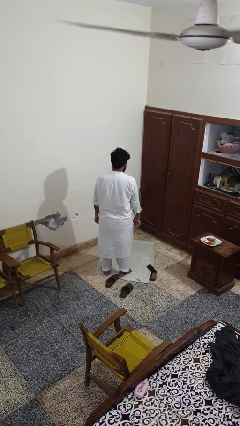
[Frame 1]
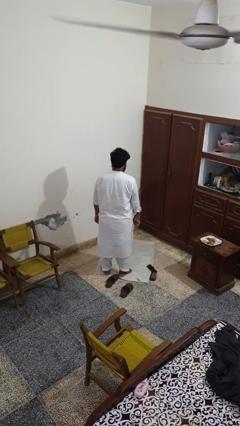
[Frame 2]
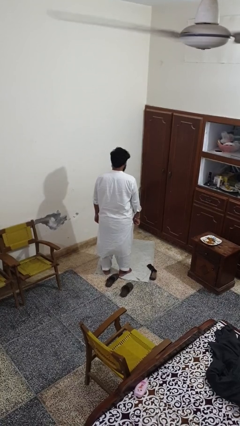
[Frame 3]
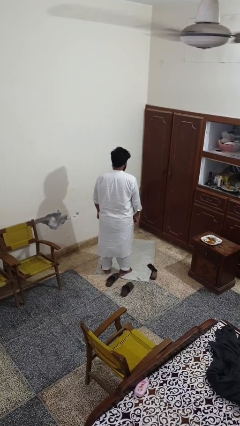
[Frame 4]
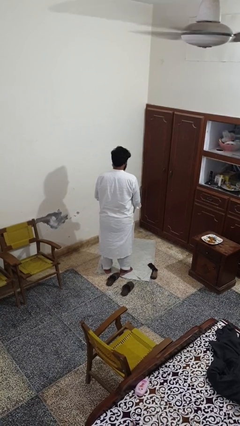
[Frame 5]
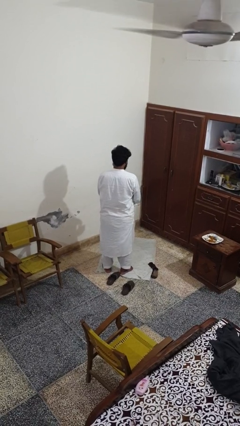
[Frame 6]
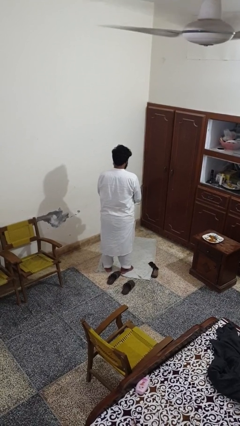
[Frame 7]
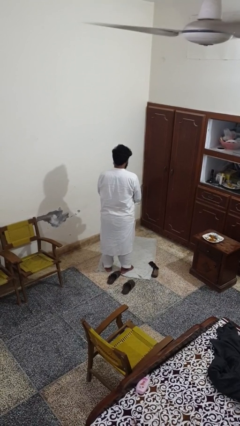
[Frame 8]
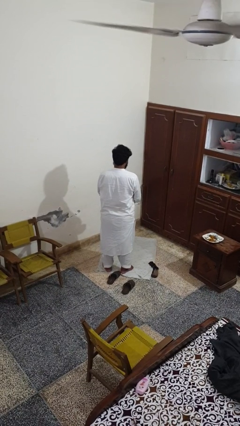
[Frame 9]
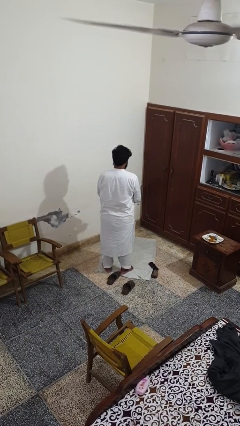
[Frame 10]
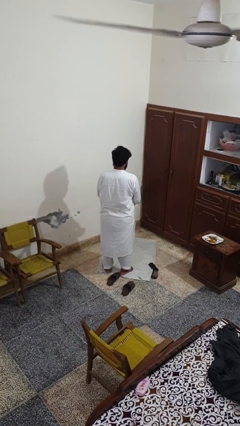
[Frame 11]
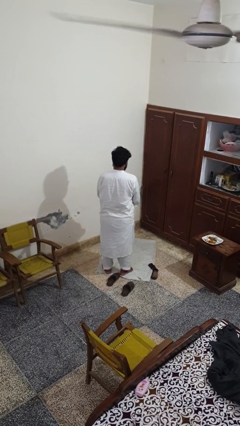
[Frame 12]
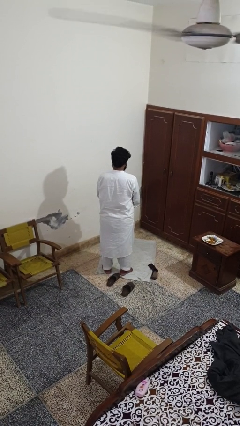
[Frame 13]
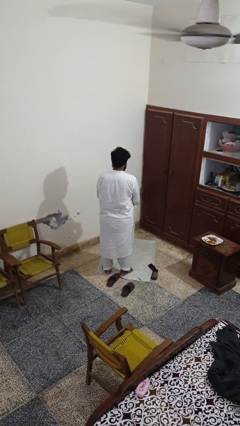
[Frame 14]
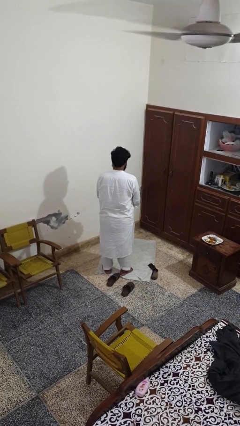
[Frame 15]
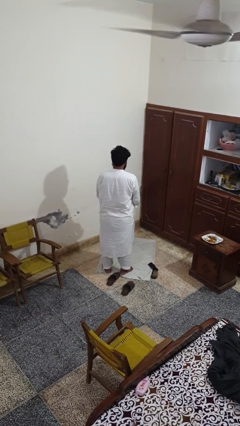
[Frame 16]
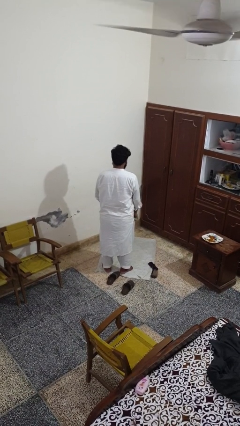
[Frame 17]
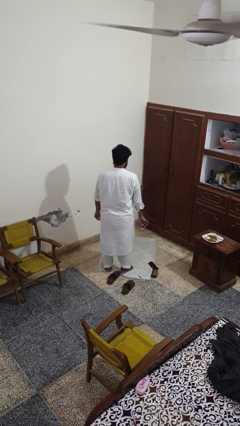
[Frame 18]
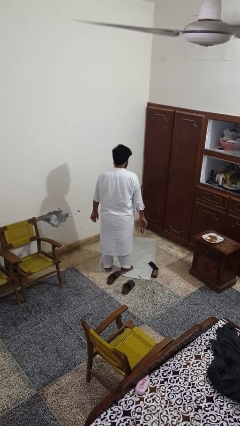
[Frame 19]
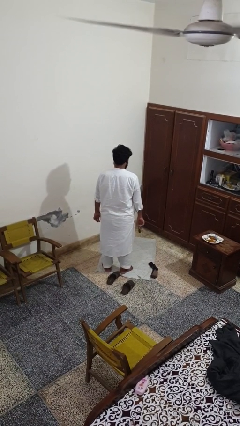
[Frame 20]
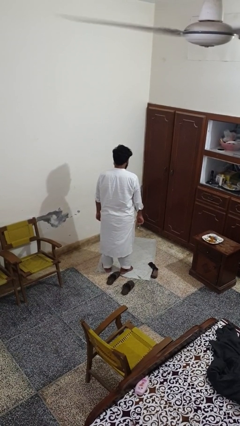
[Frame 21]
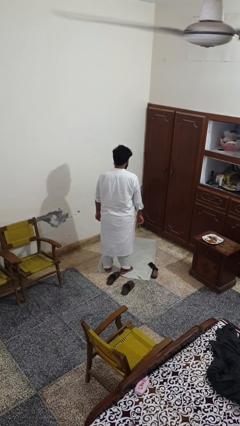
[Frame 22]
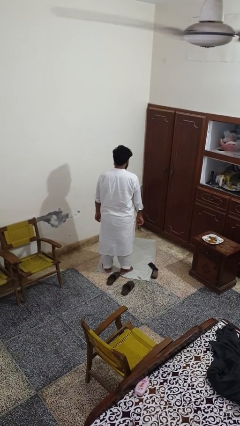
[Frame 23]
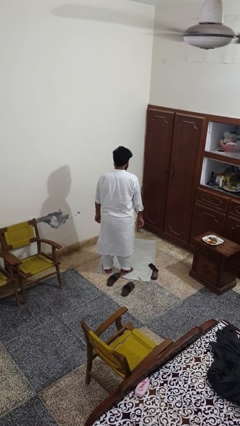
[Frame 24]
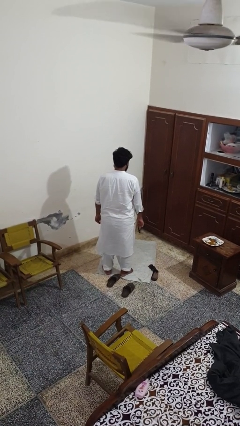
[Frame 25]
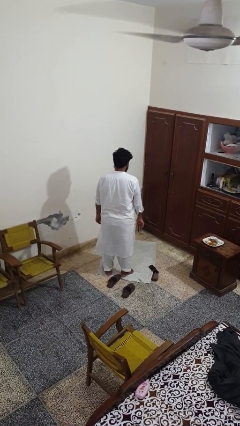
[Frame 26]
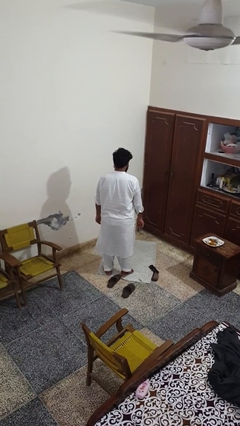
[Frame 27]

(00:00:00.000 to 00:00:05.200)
person takes off wristwatch

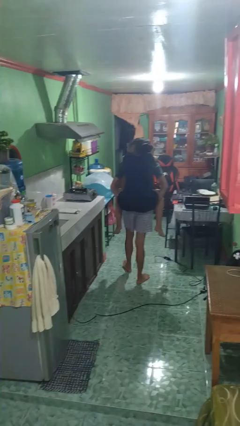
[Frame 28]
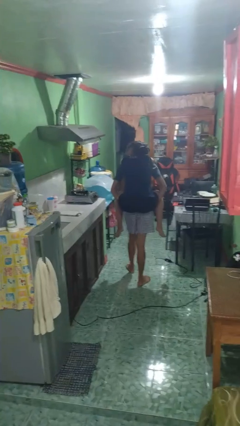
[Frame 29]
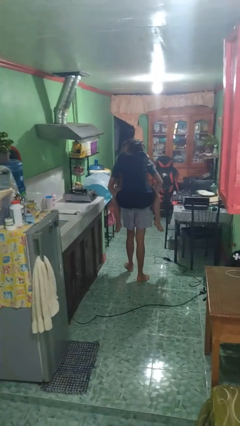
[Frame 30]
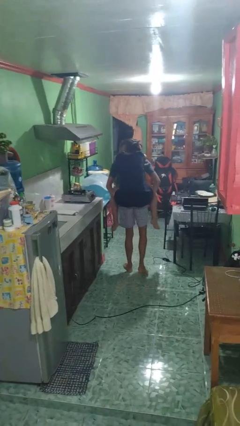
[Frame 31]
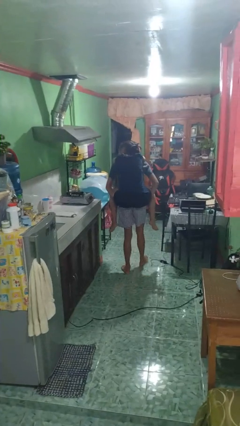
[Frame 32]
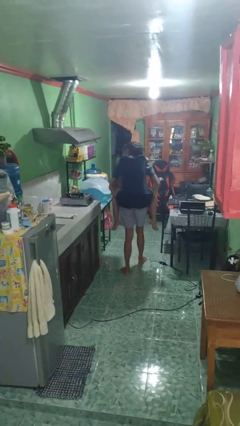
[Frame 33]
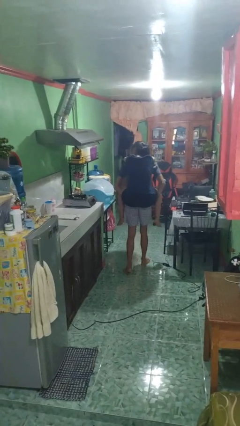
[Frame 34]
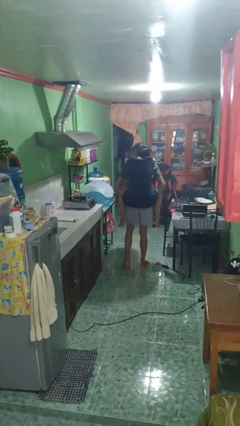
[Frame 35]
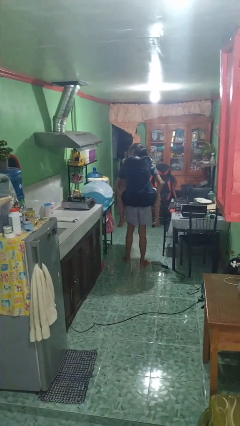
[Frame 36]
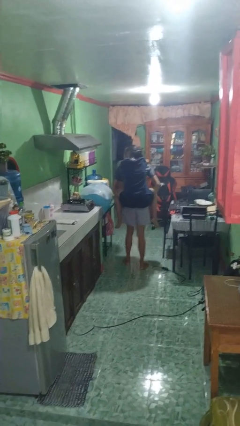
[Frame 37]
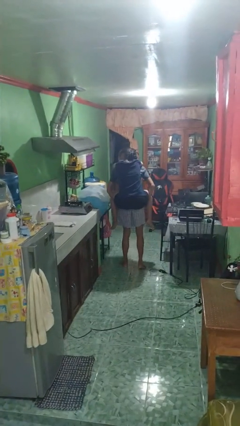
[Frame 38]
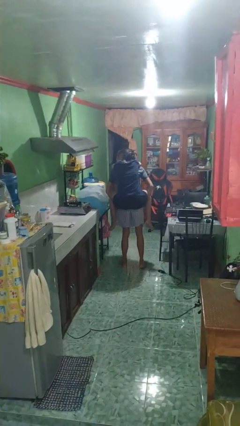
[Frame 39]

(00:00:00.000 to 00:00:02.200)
person carries person on back

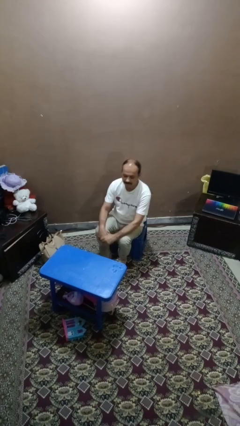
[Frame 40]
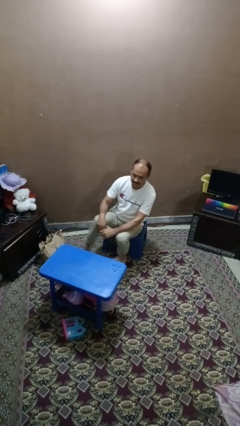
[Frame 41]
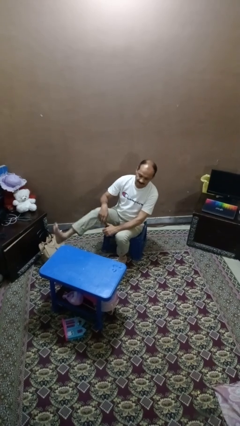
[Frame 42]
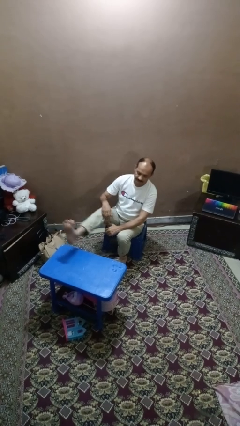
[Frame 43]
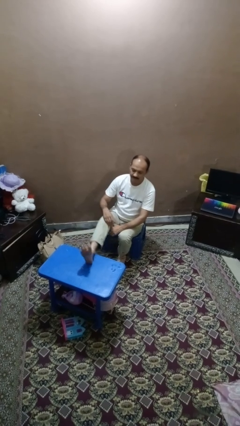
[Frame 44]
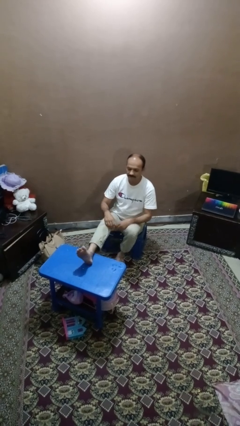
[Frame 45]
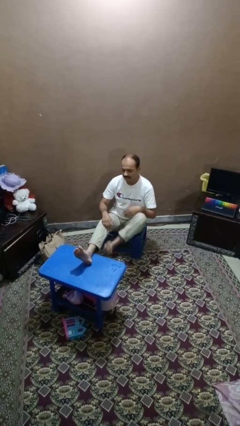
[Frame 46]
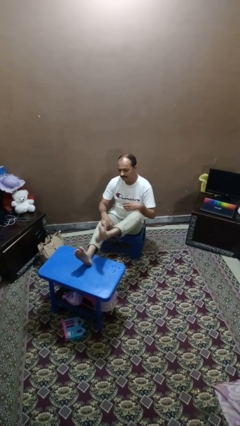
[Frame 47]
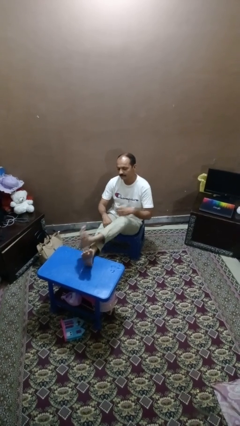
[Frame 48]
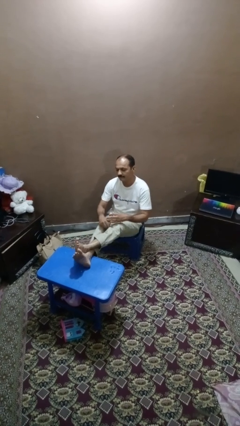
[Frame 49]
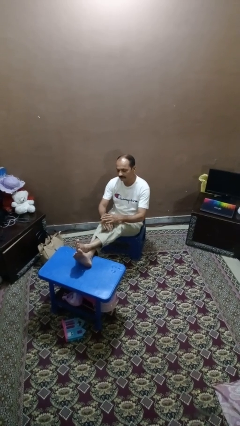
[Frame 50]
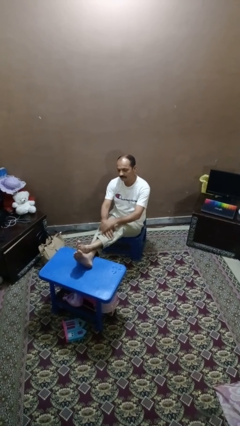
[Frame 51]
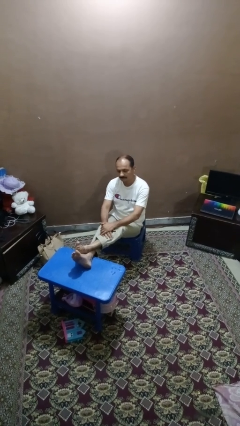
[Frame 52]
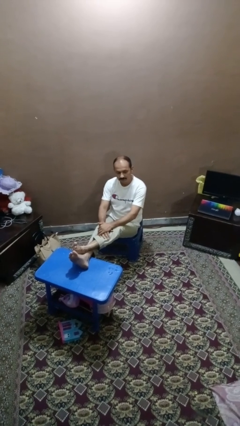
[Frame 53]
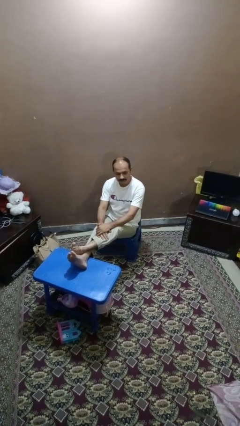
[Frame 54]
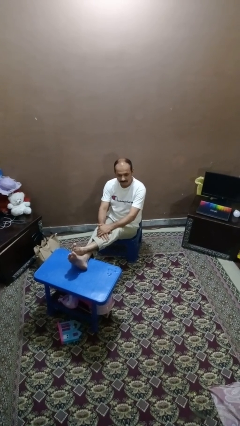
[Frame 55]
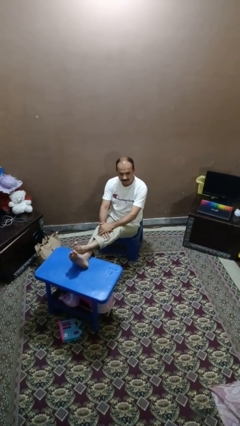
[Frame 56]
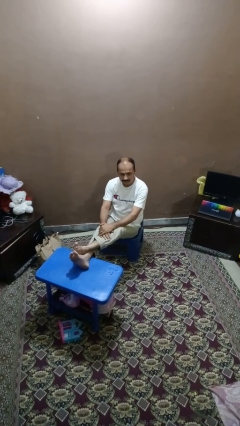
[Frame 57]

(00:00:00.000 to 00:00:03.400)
person puts feet up

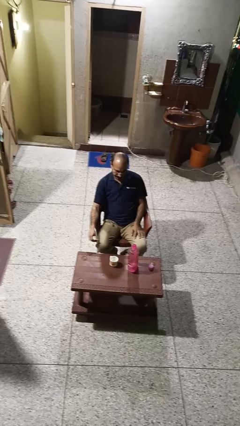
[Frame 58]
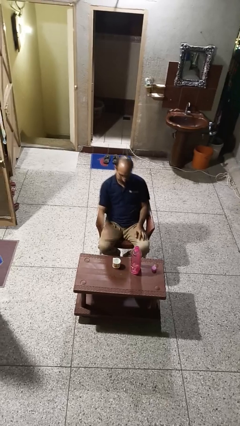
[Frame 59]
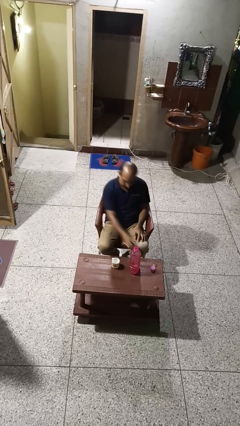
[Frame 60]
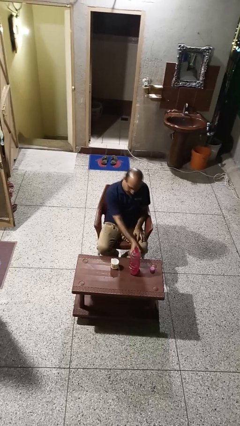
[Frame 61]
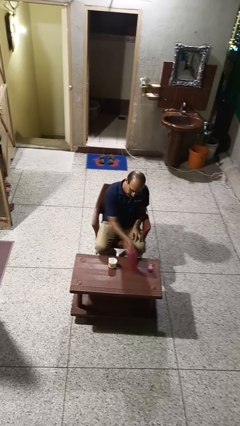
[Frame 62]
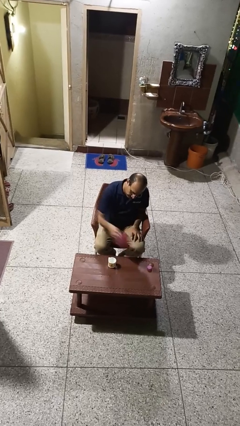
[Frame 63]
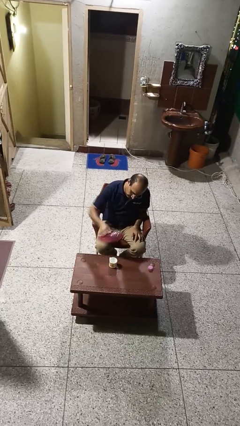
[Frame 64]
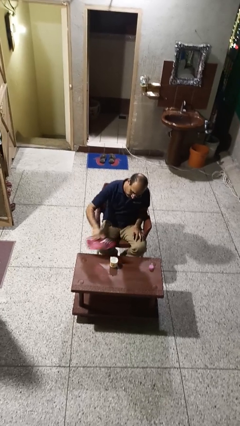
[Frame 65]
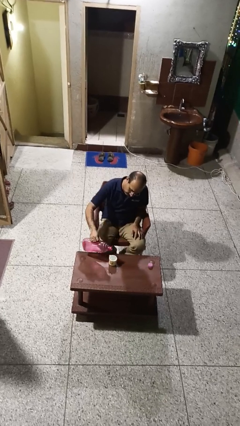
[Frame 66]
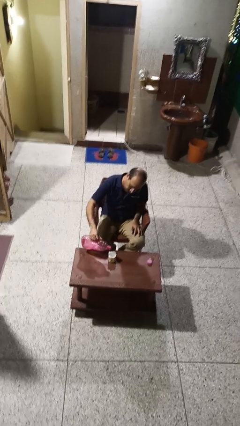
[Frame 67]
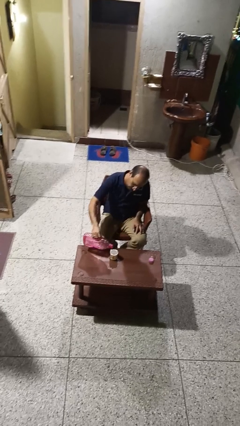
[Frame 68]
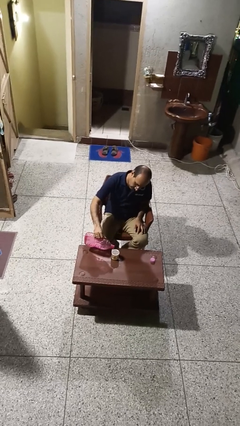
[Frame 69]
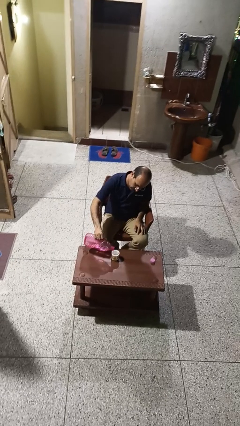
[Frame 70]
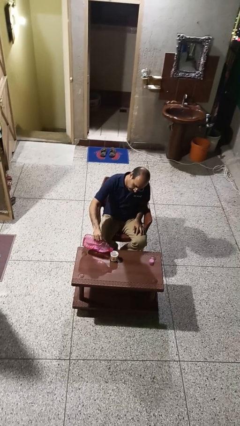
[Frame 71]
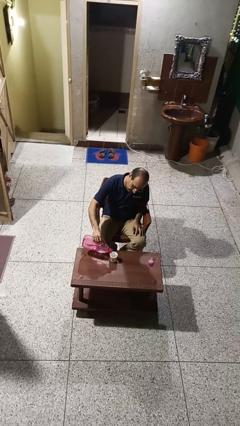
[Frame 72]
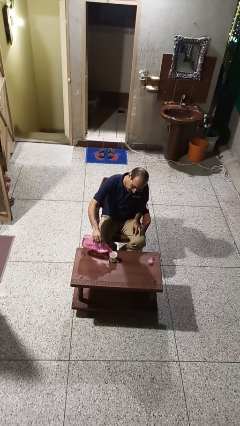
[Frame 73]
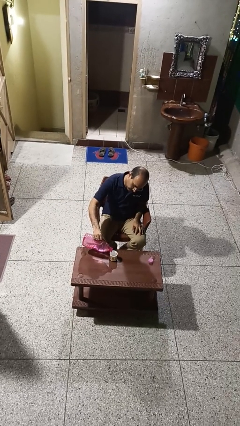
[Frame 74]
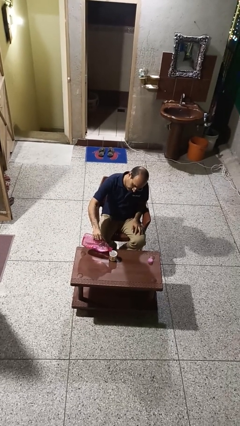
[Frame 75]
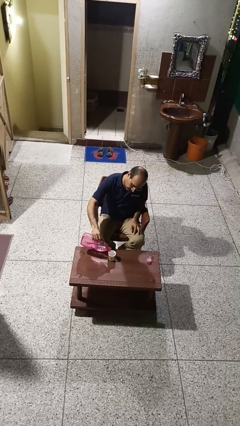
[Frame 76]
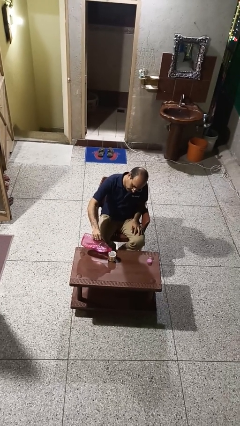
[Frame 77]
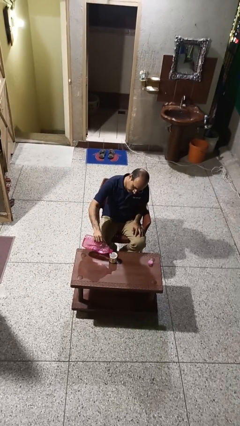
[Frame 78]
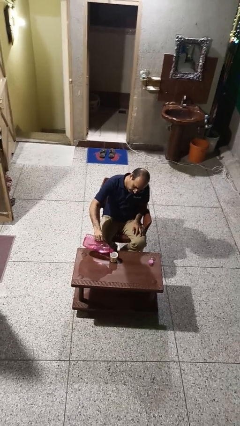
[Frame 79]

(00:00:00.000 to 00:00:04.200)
person pours liquid into cup

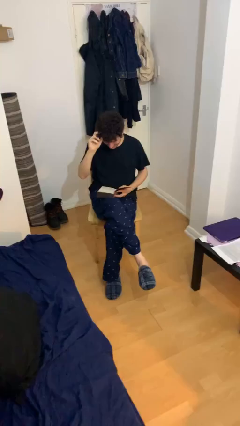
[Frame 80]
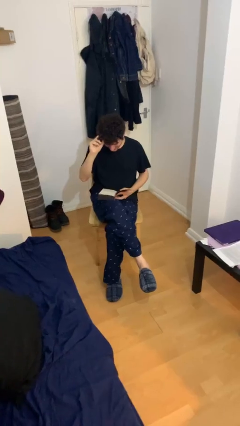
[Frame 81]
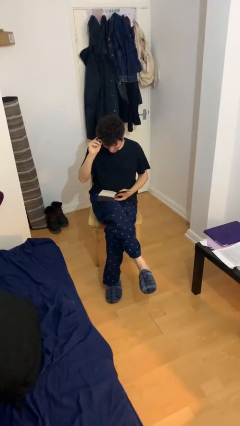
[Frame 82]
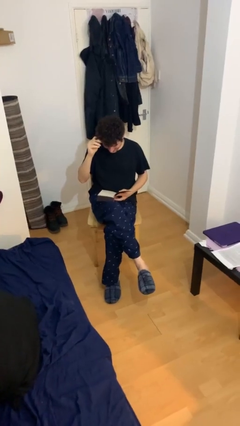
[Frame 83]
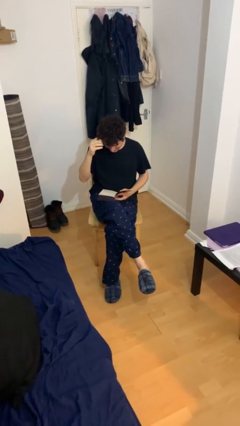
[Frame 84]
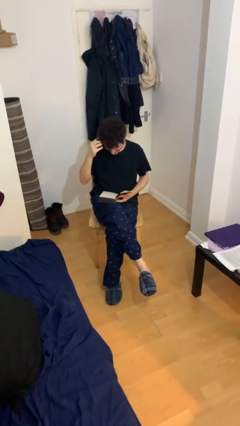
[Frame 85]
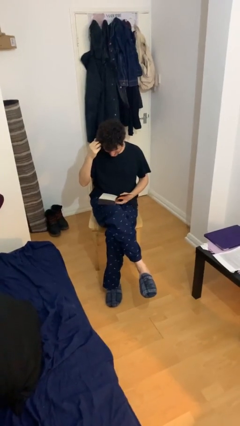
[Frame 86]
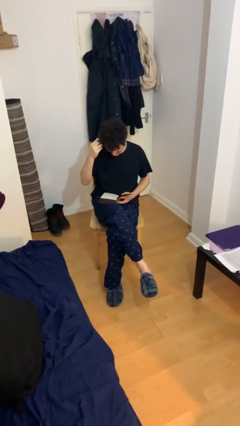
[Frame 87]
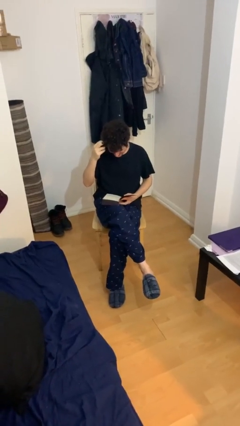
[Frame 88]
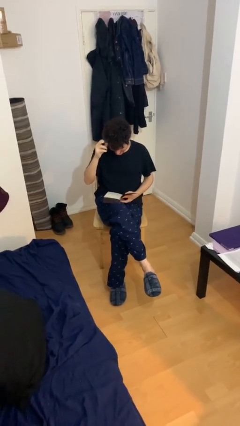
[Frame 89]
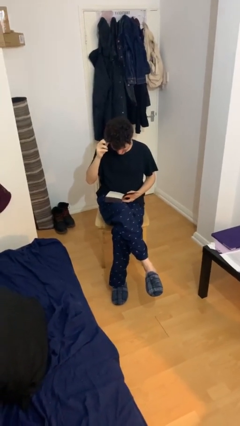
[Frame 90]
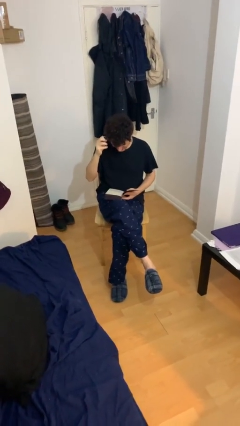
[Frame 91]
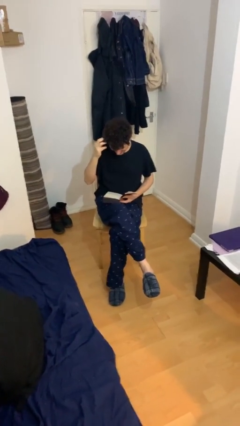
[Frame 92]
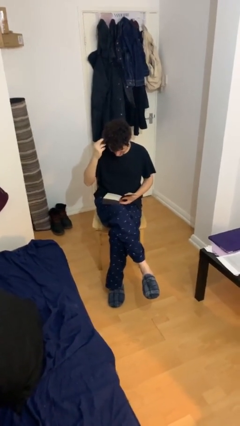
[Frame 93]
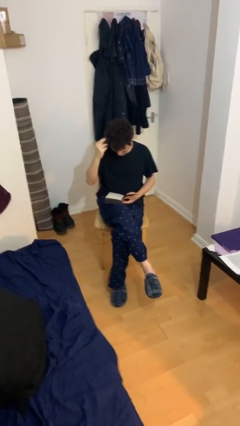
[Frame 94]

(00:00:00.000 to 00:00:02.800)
person reads document
